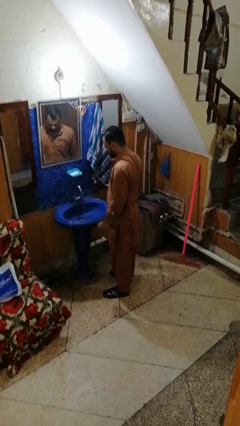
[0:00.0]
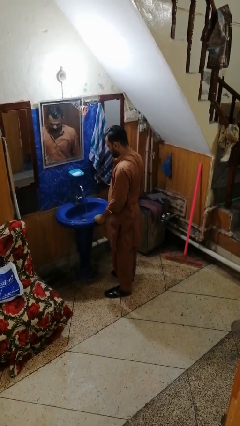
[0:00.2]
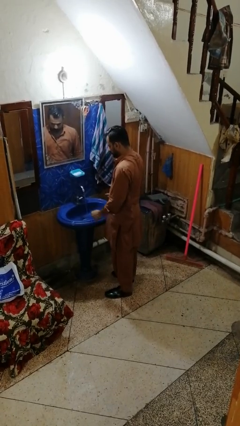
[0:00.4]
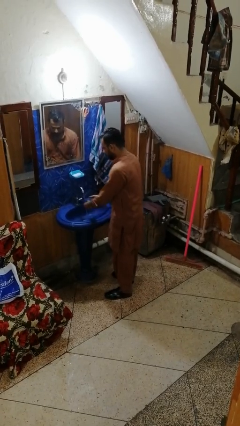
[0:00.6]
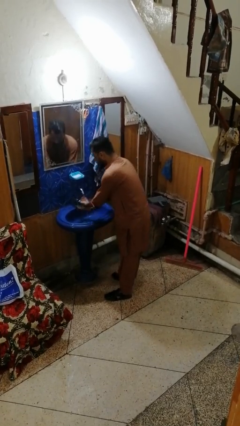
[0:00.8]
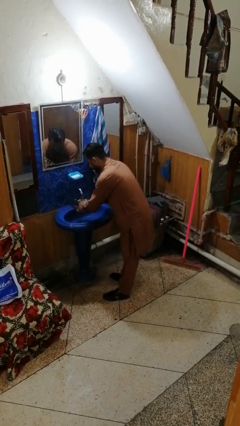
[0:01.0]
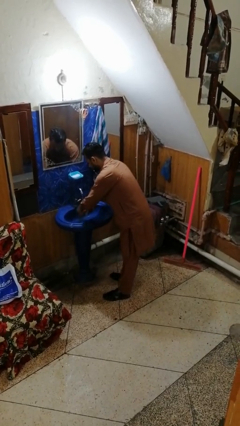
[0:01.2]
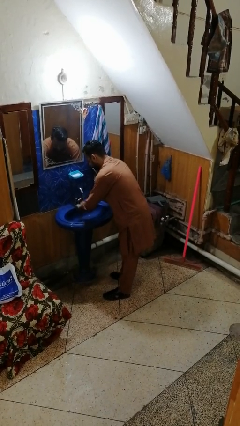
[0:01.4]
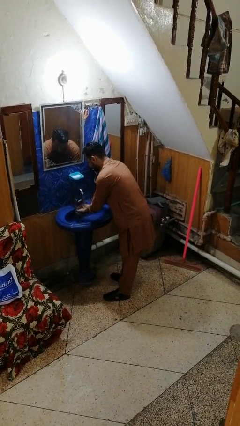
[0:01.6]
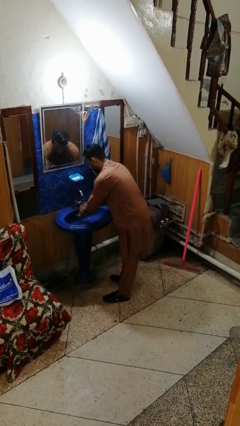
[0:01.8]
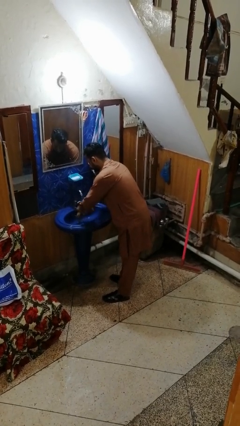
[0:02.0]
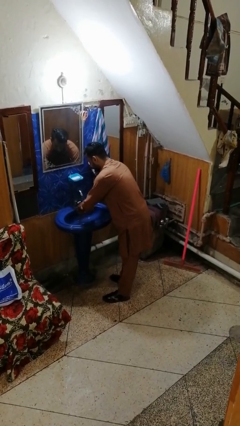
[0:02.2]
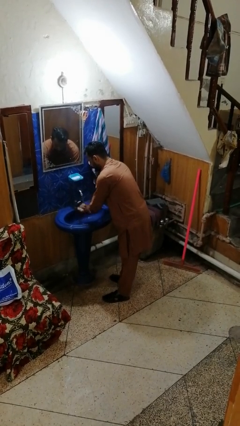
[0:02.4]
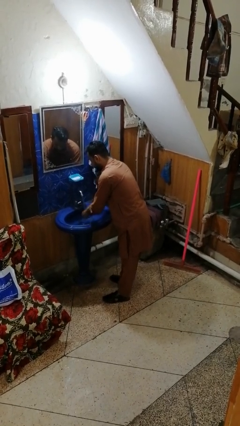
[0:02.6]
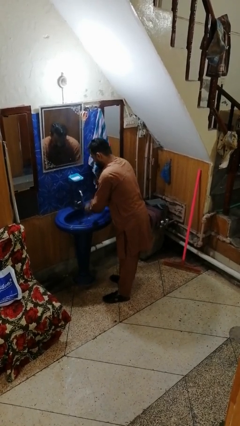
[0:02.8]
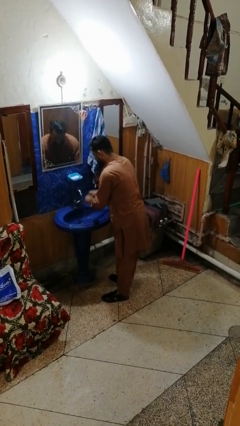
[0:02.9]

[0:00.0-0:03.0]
person washes hands

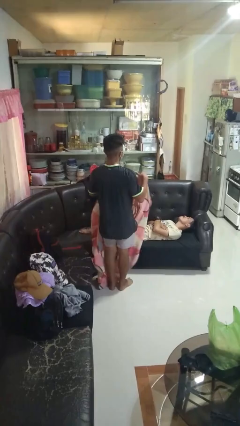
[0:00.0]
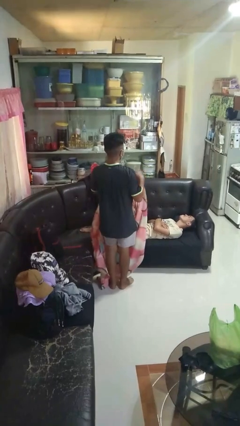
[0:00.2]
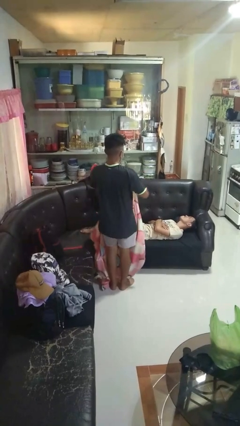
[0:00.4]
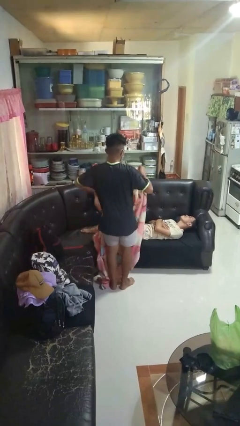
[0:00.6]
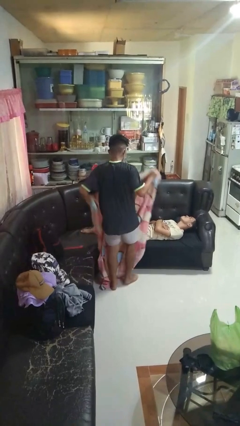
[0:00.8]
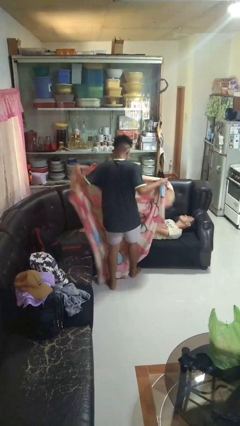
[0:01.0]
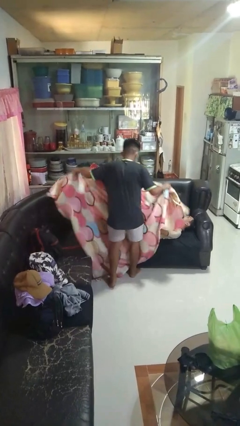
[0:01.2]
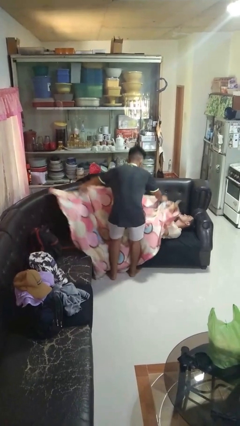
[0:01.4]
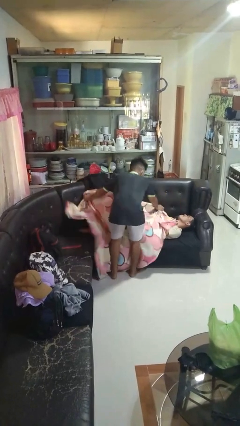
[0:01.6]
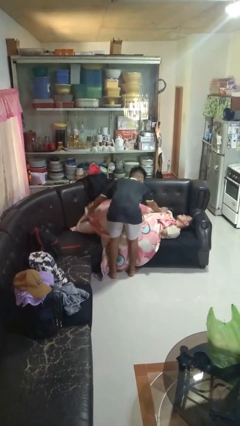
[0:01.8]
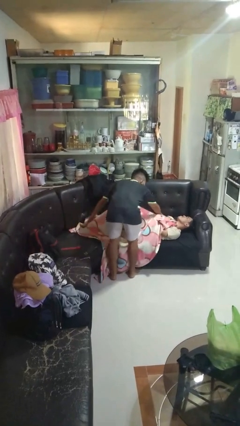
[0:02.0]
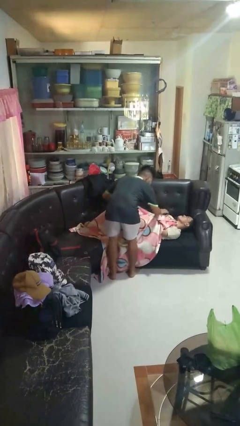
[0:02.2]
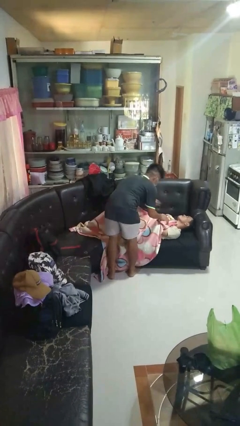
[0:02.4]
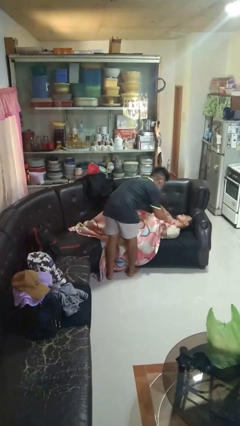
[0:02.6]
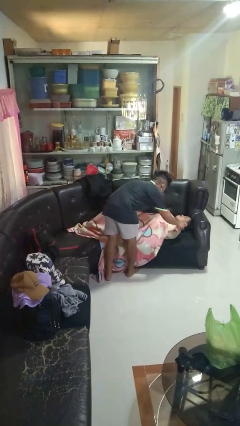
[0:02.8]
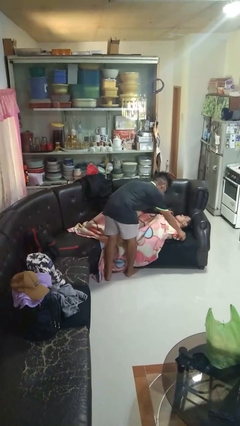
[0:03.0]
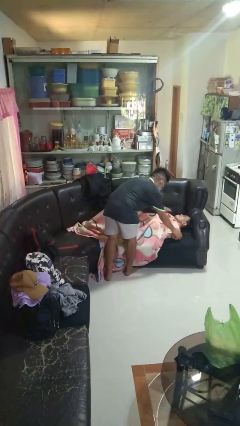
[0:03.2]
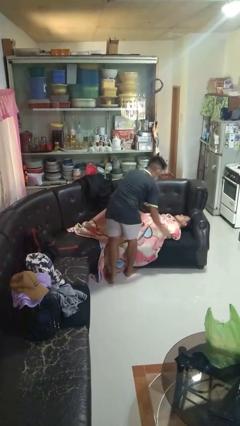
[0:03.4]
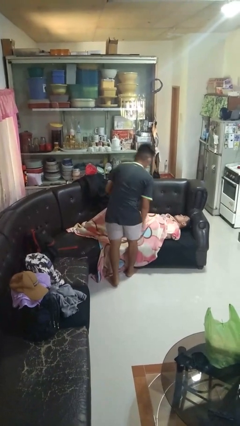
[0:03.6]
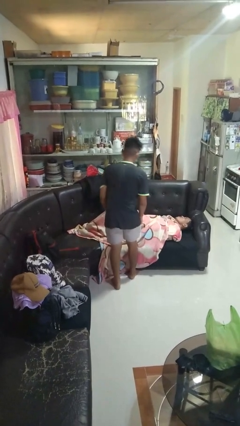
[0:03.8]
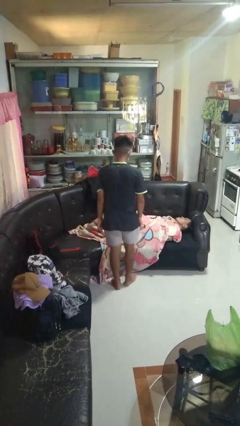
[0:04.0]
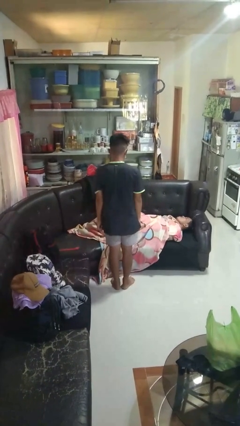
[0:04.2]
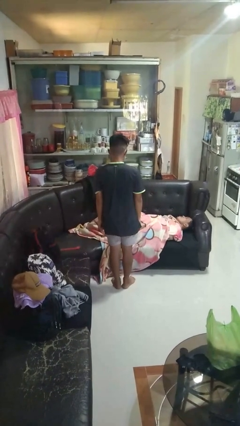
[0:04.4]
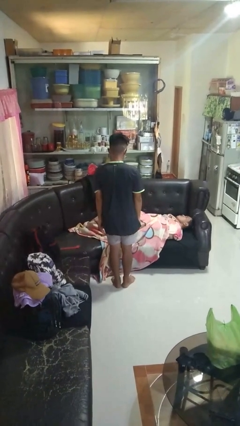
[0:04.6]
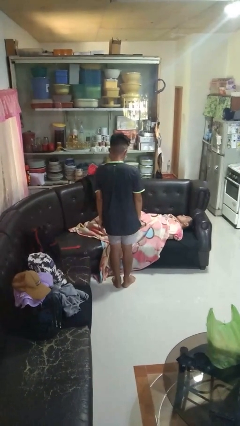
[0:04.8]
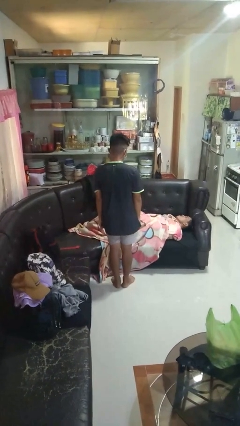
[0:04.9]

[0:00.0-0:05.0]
person covers friend with blanket

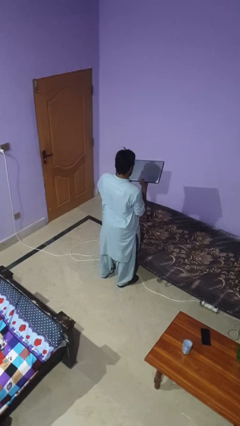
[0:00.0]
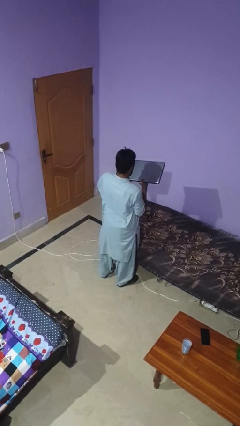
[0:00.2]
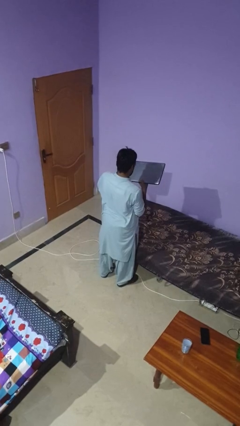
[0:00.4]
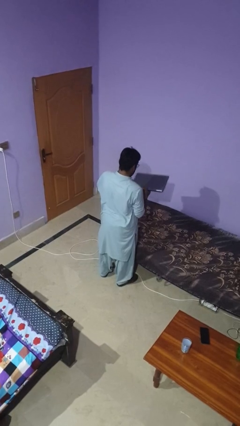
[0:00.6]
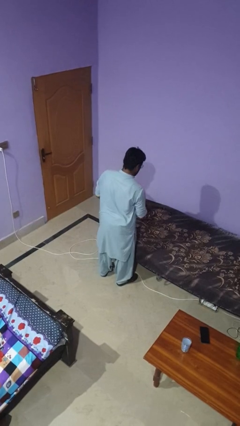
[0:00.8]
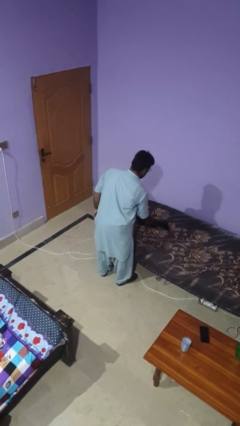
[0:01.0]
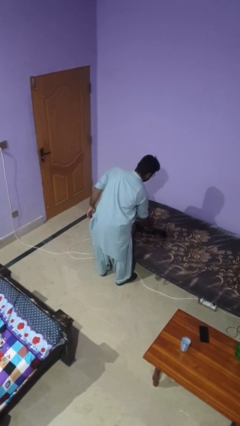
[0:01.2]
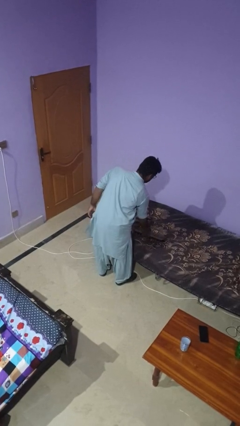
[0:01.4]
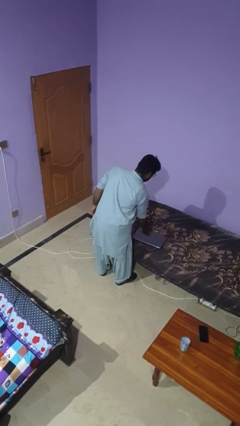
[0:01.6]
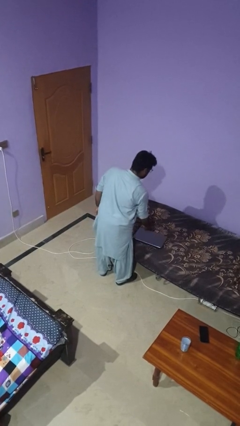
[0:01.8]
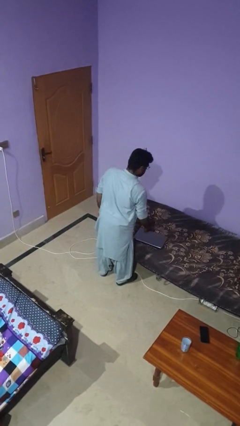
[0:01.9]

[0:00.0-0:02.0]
person puts down object on bed

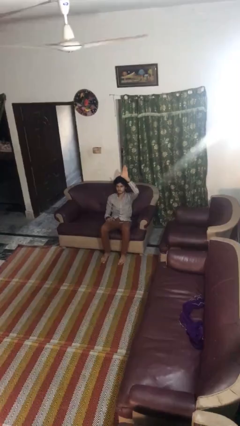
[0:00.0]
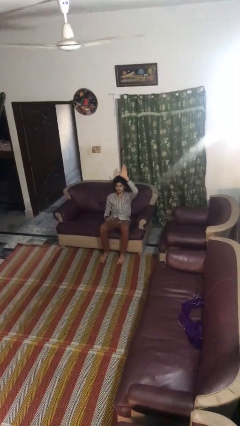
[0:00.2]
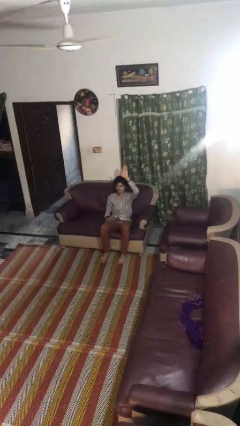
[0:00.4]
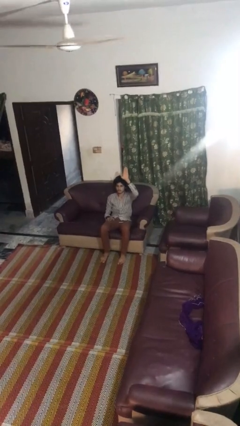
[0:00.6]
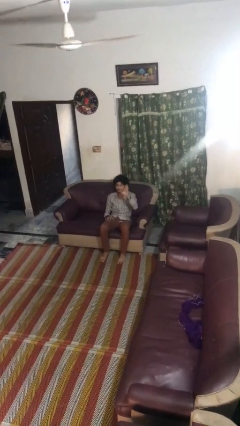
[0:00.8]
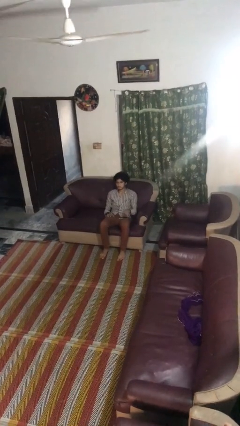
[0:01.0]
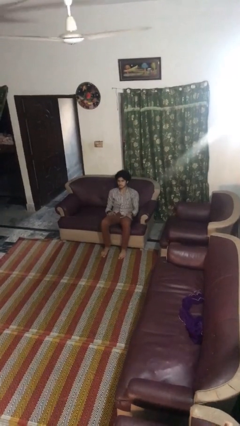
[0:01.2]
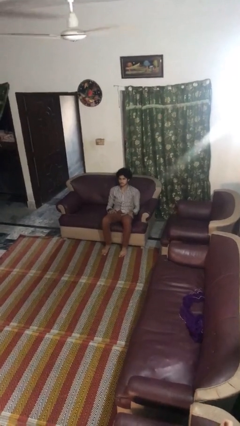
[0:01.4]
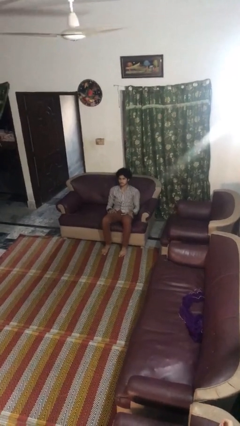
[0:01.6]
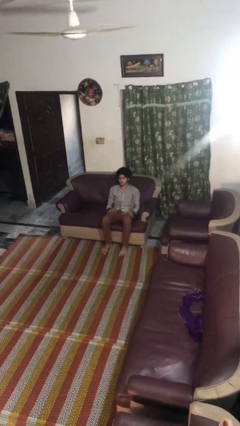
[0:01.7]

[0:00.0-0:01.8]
person gestures lower hand

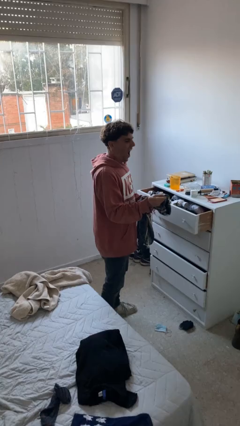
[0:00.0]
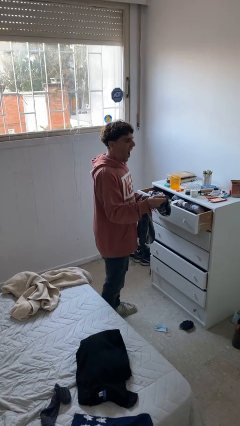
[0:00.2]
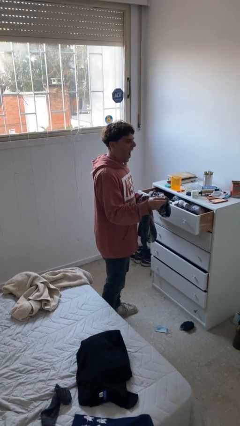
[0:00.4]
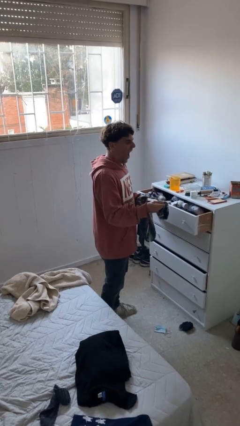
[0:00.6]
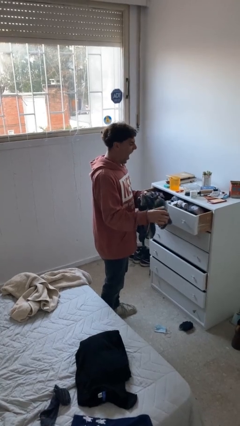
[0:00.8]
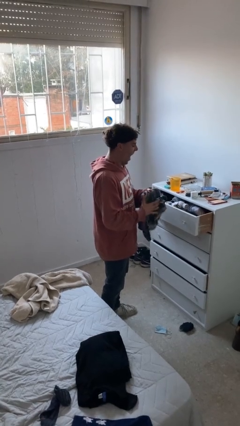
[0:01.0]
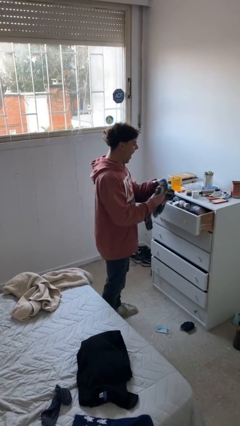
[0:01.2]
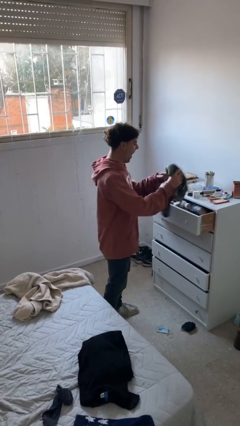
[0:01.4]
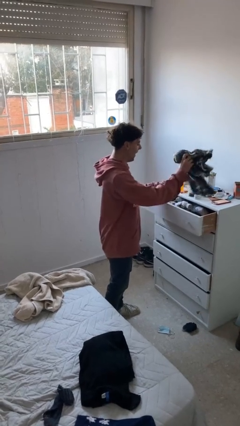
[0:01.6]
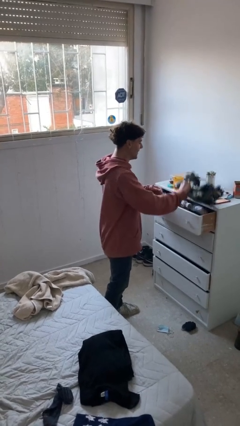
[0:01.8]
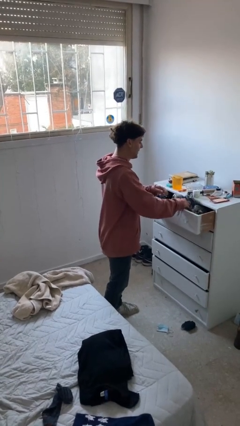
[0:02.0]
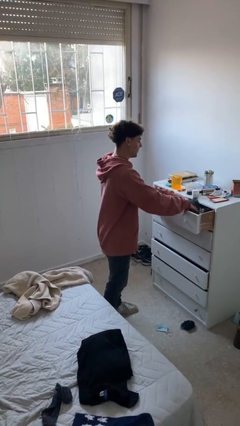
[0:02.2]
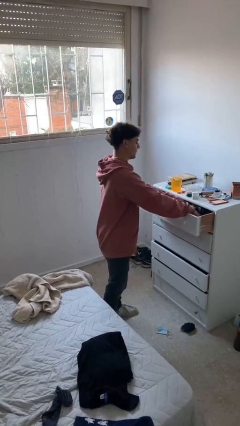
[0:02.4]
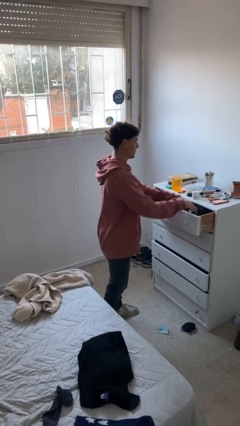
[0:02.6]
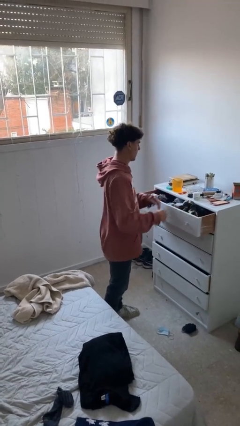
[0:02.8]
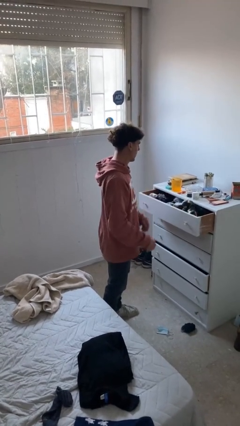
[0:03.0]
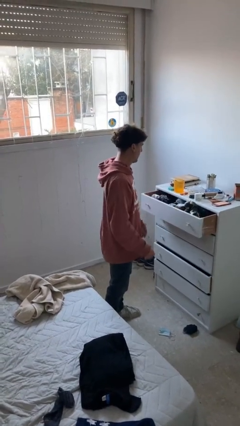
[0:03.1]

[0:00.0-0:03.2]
person puts clothes into dresser

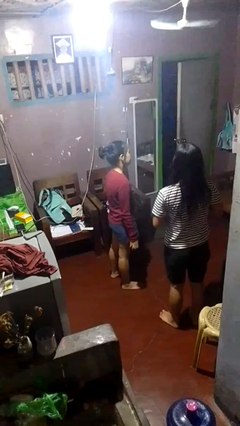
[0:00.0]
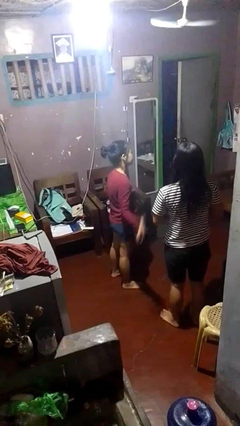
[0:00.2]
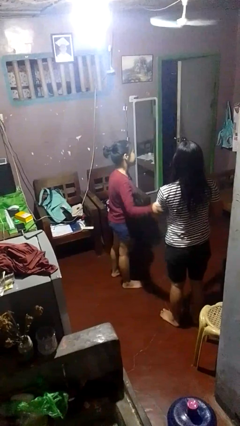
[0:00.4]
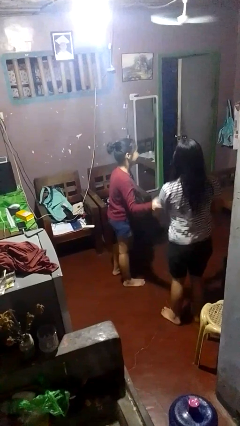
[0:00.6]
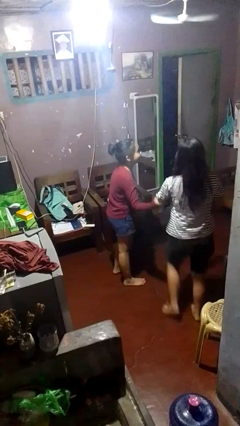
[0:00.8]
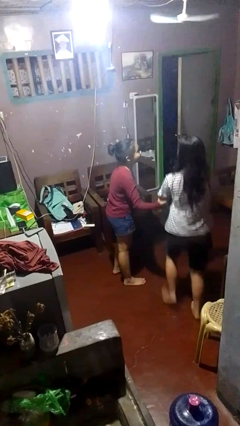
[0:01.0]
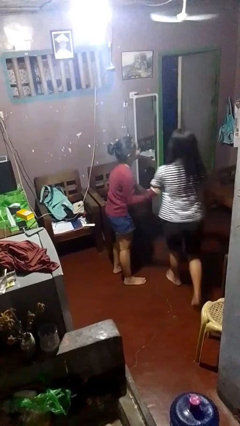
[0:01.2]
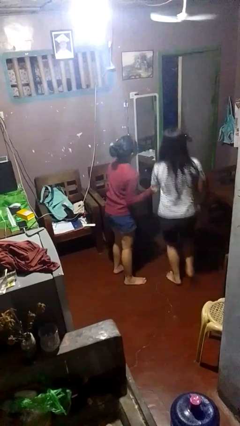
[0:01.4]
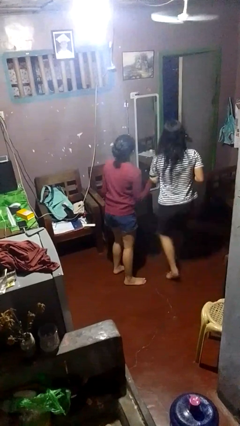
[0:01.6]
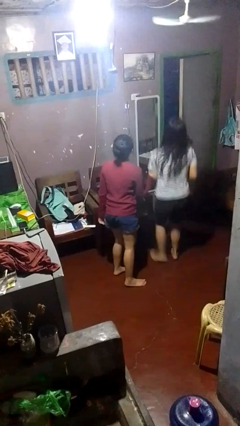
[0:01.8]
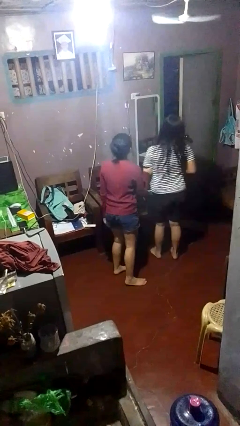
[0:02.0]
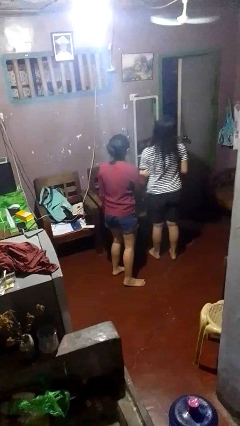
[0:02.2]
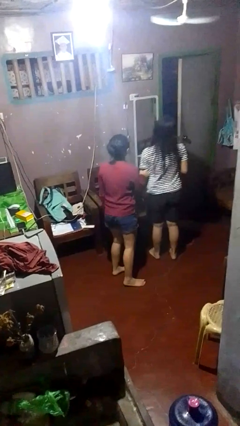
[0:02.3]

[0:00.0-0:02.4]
person grabs person by bicep
